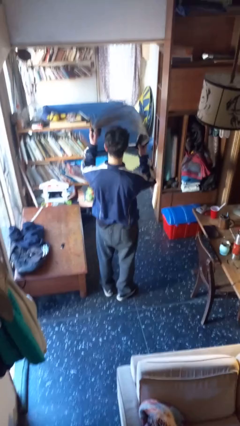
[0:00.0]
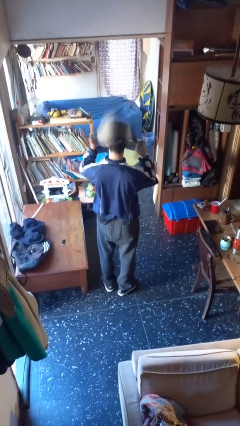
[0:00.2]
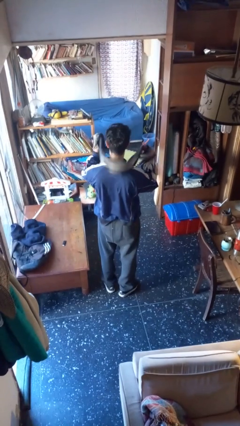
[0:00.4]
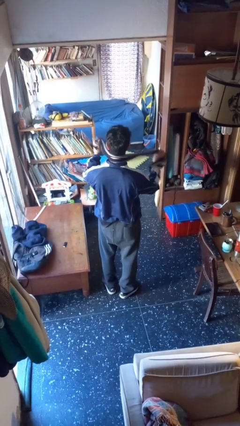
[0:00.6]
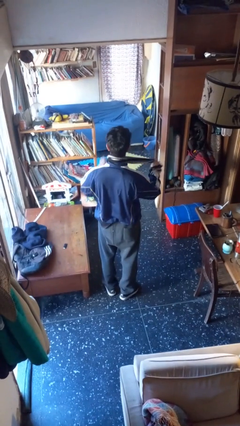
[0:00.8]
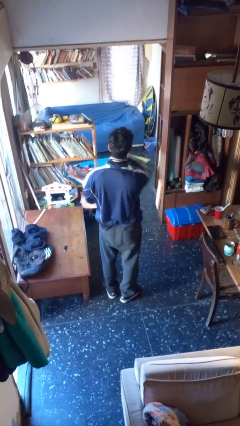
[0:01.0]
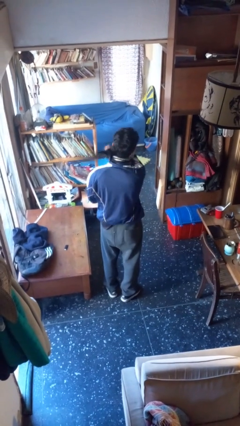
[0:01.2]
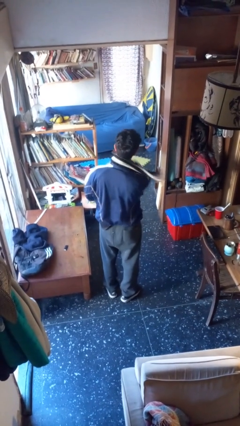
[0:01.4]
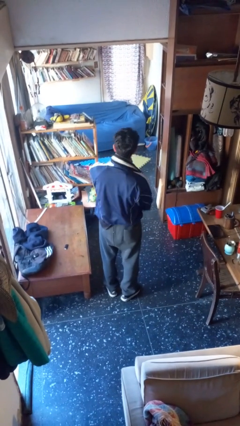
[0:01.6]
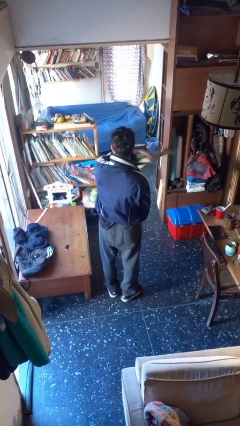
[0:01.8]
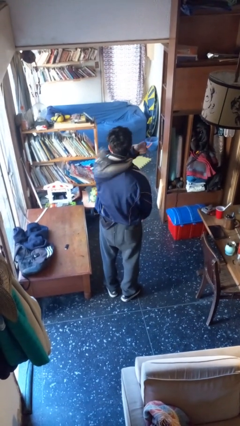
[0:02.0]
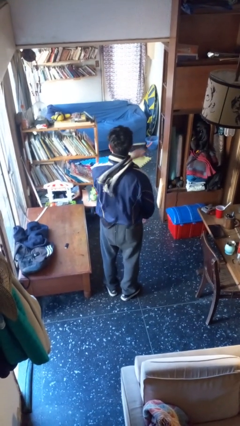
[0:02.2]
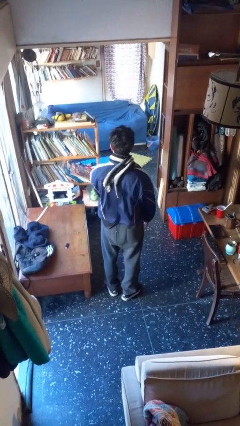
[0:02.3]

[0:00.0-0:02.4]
person puts on scarf

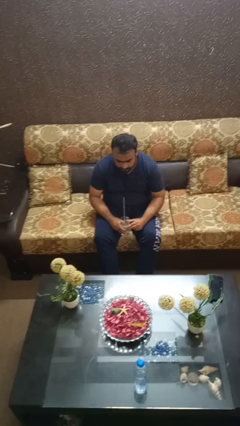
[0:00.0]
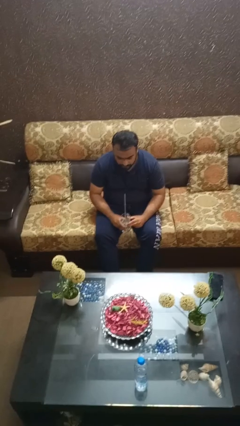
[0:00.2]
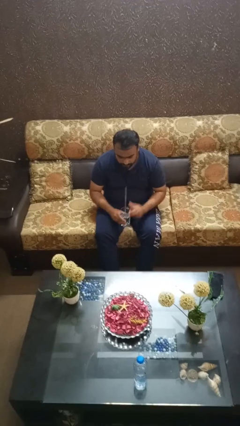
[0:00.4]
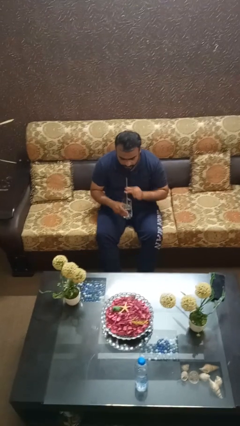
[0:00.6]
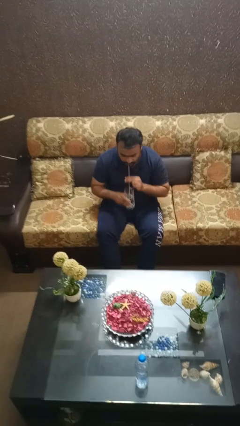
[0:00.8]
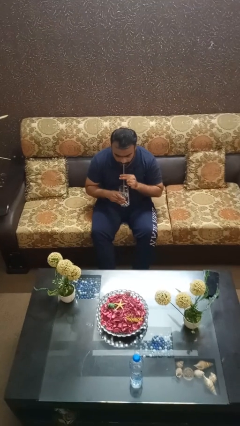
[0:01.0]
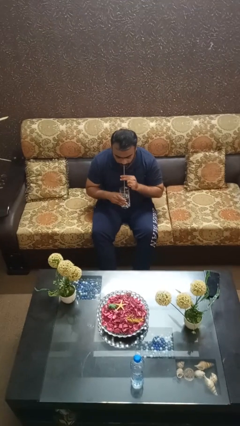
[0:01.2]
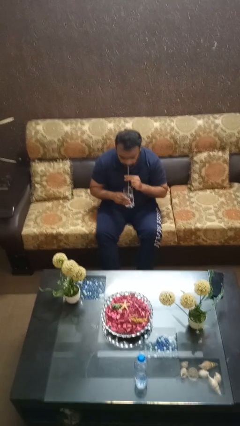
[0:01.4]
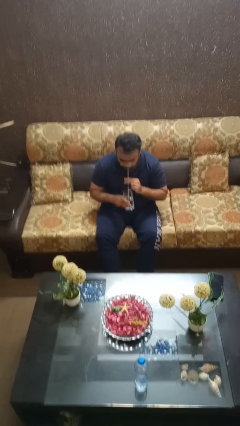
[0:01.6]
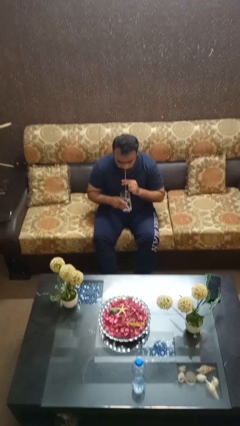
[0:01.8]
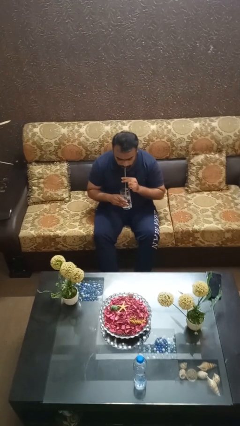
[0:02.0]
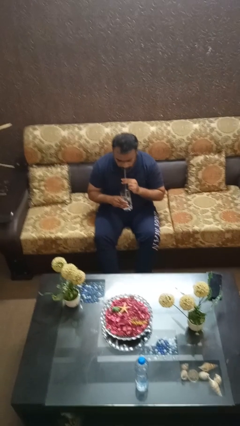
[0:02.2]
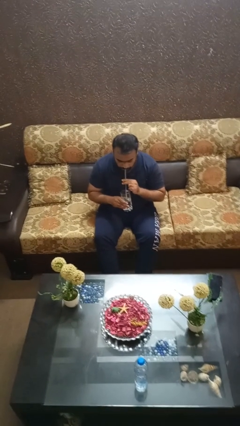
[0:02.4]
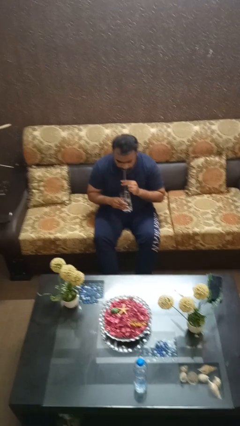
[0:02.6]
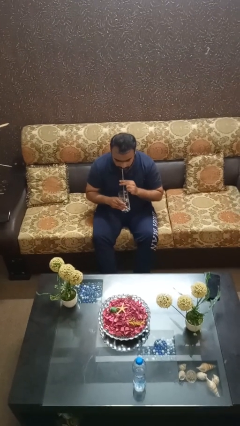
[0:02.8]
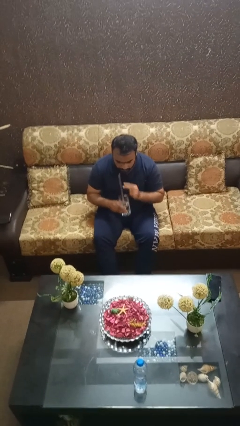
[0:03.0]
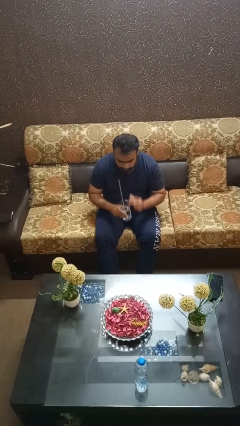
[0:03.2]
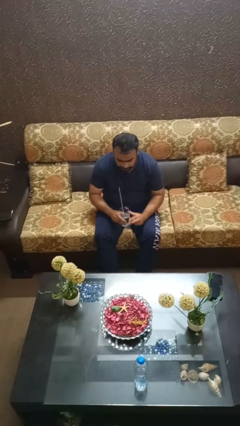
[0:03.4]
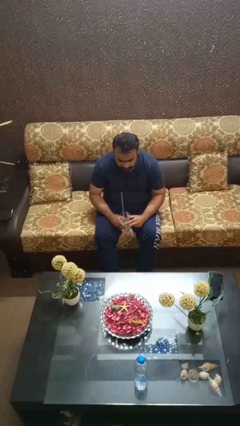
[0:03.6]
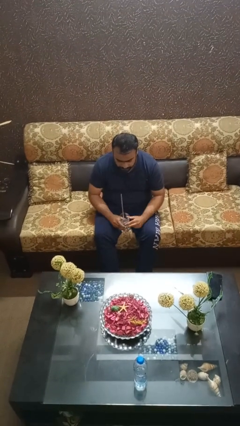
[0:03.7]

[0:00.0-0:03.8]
person drinks from straw

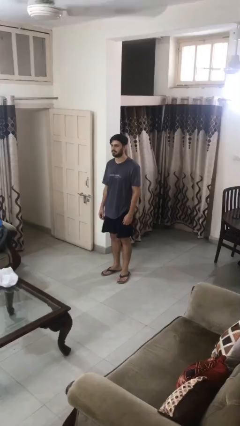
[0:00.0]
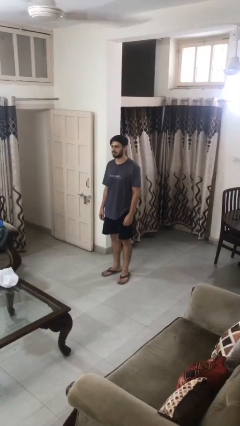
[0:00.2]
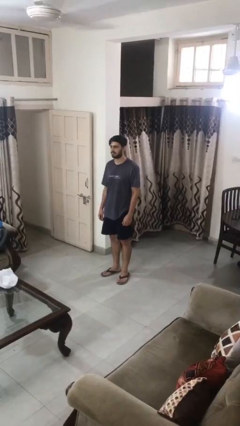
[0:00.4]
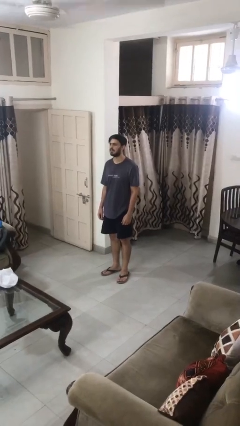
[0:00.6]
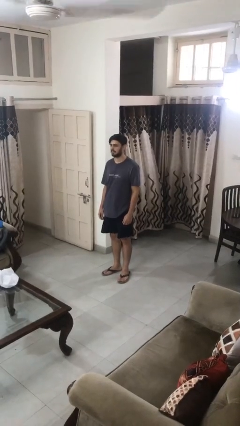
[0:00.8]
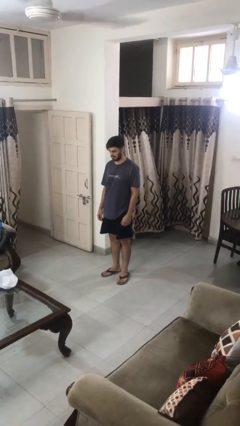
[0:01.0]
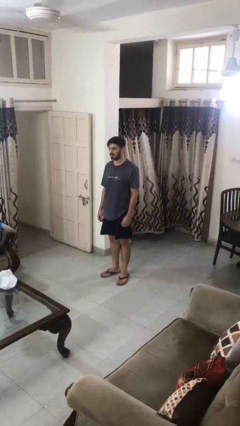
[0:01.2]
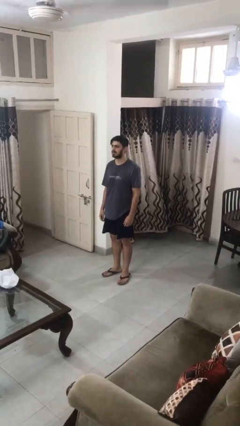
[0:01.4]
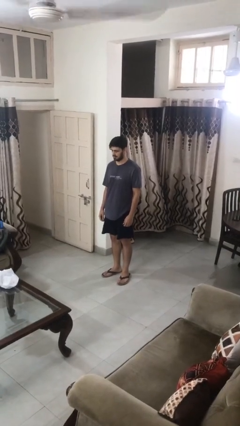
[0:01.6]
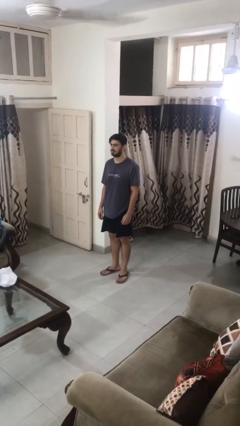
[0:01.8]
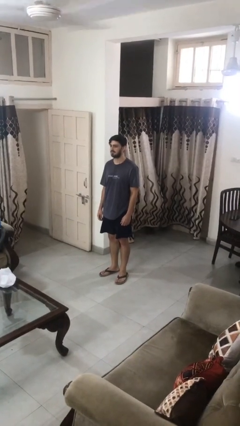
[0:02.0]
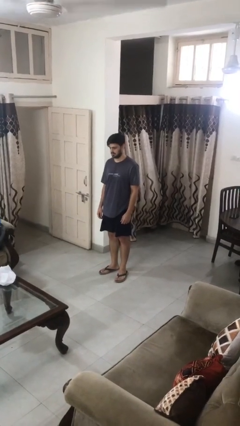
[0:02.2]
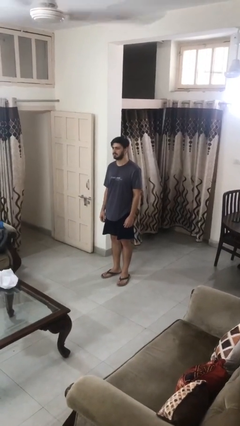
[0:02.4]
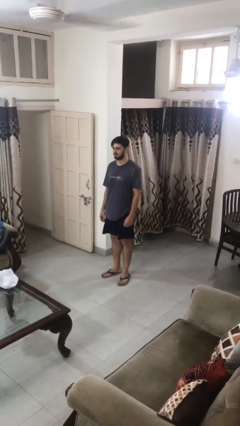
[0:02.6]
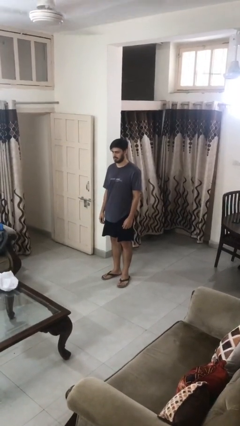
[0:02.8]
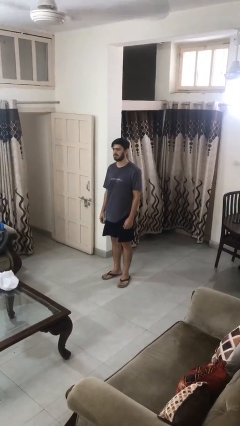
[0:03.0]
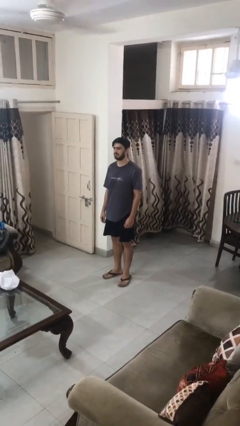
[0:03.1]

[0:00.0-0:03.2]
person nods head

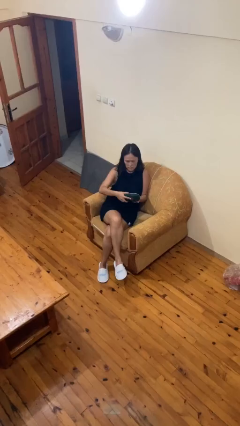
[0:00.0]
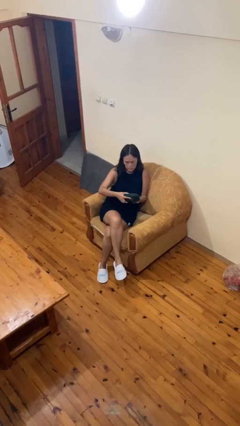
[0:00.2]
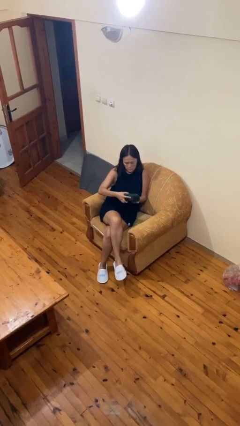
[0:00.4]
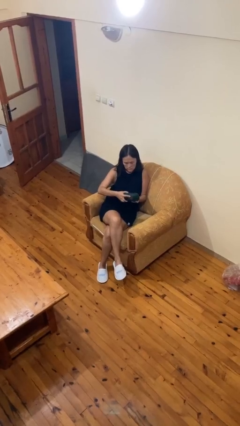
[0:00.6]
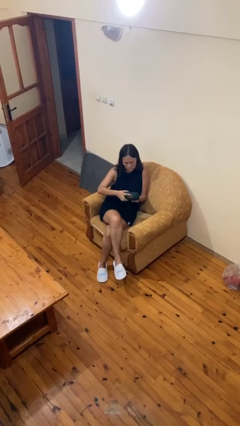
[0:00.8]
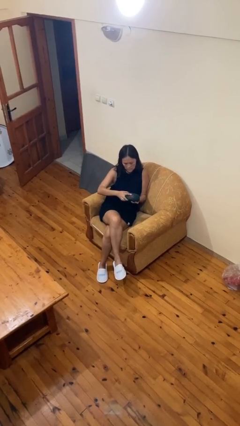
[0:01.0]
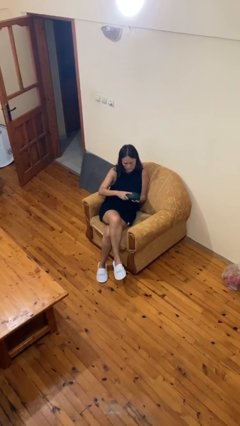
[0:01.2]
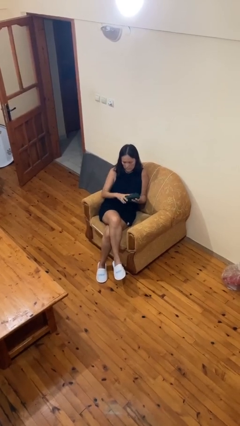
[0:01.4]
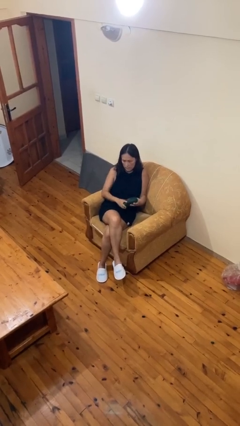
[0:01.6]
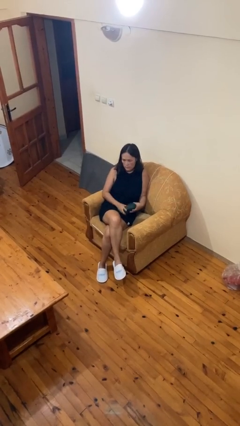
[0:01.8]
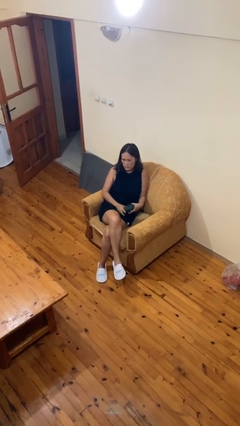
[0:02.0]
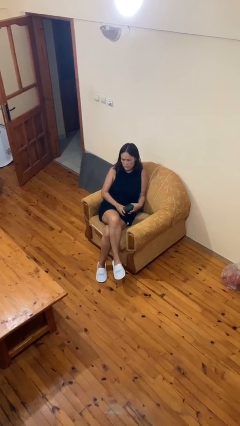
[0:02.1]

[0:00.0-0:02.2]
person closes jewelry box

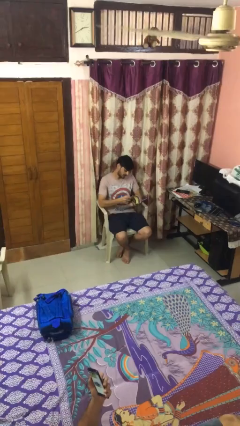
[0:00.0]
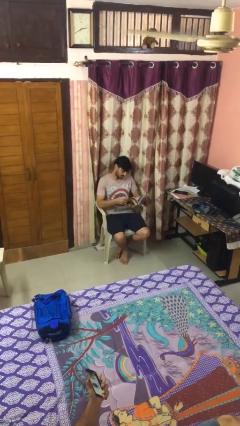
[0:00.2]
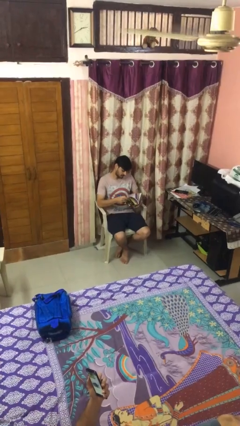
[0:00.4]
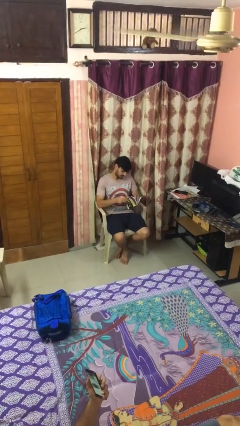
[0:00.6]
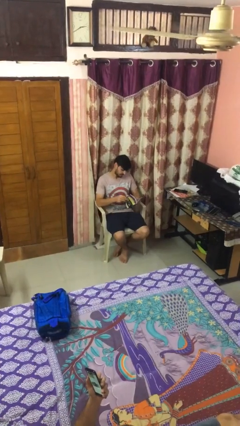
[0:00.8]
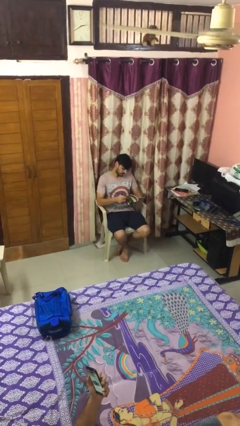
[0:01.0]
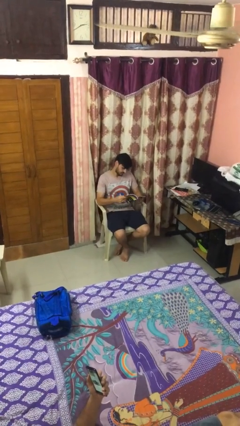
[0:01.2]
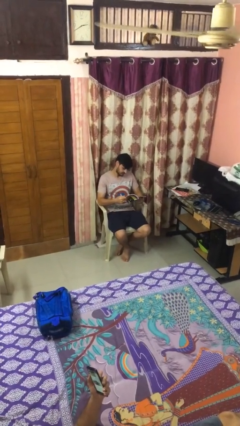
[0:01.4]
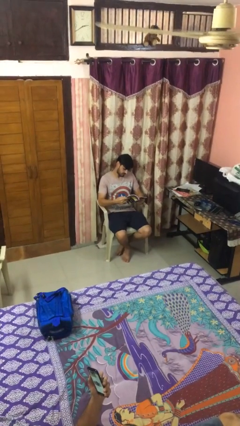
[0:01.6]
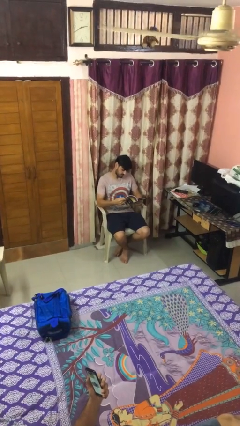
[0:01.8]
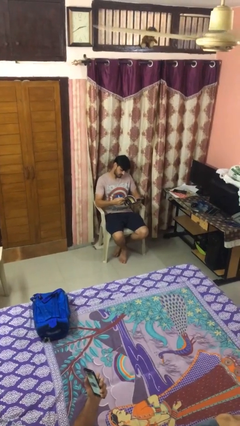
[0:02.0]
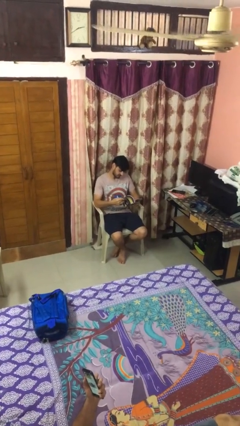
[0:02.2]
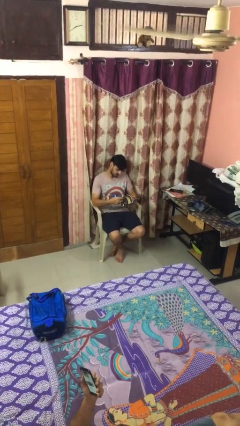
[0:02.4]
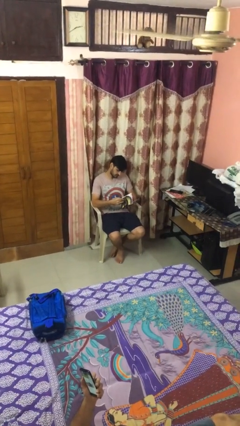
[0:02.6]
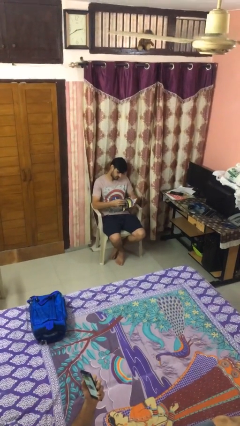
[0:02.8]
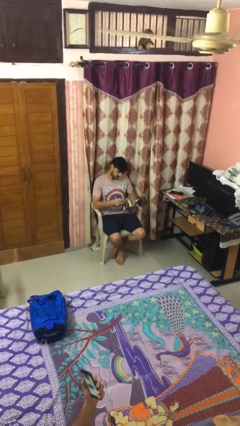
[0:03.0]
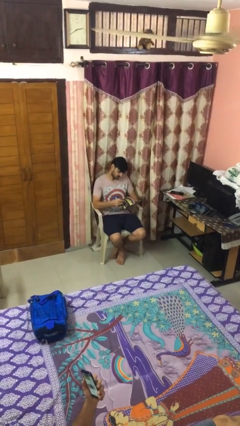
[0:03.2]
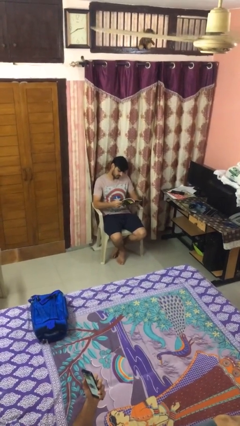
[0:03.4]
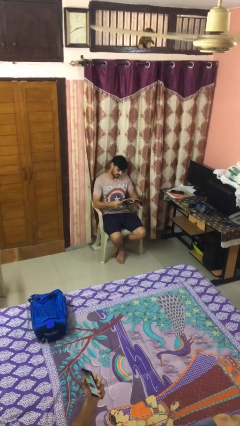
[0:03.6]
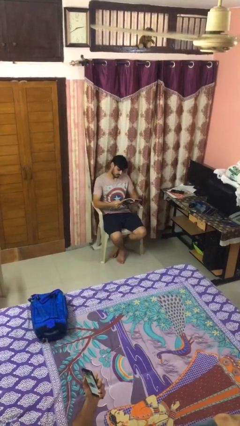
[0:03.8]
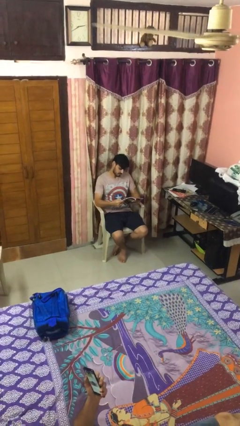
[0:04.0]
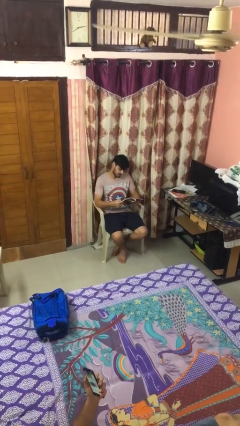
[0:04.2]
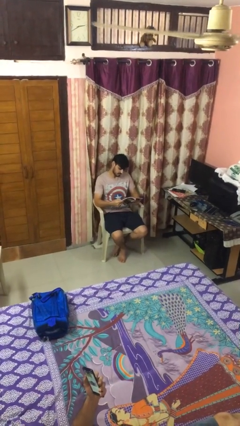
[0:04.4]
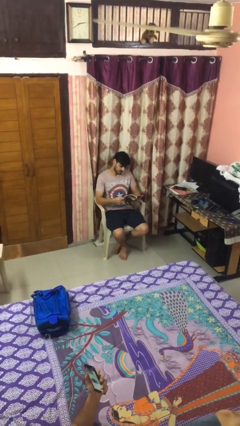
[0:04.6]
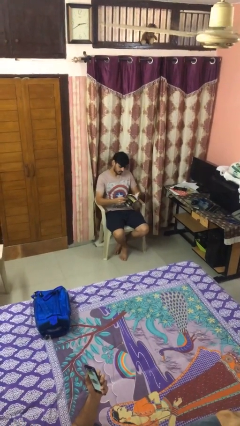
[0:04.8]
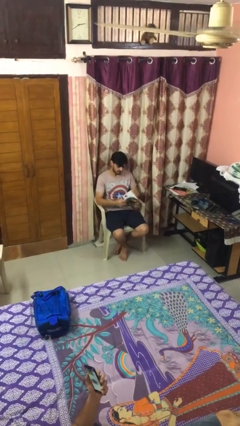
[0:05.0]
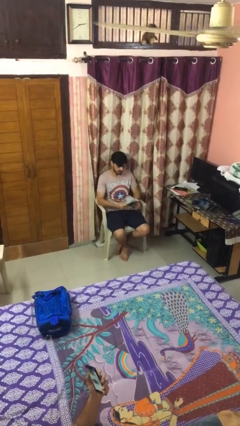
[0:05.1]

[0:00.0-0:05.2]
person reads book

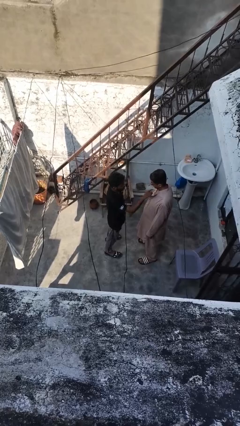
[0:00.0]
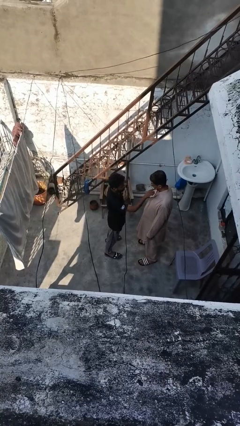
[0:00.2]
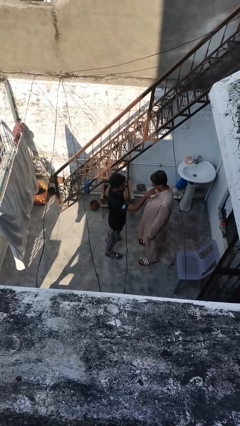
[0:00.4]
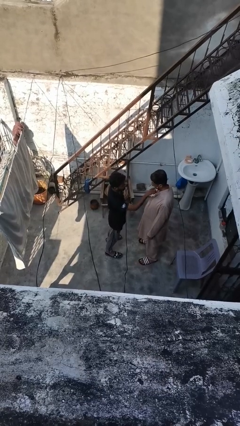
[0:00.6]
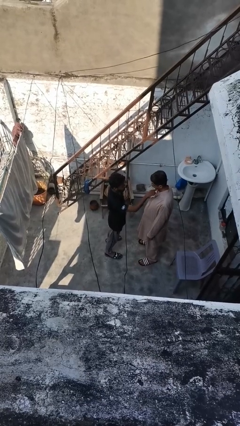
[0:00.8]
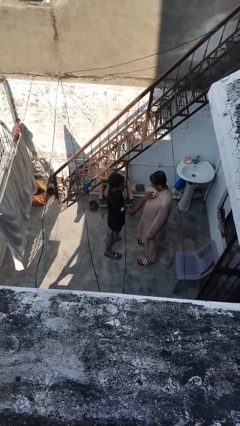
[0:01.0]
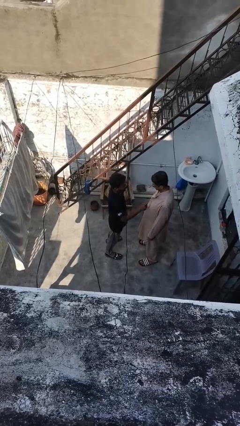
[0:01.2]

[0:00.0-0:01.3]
person touches face of person
